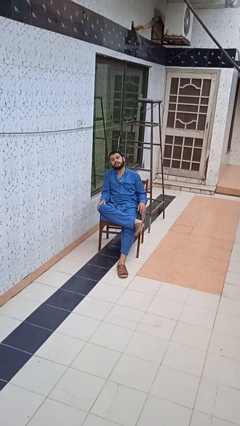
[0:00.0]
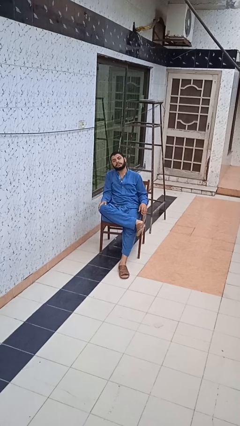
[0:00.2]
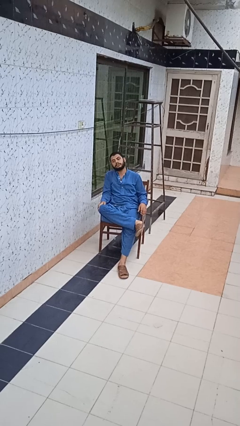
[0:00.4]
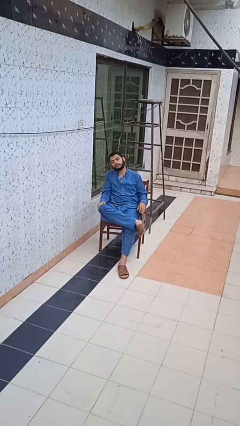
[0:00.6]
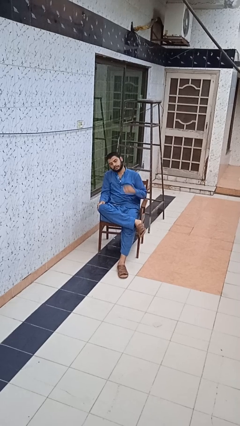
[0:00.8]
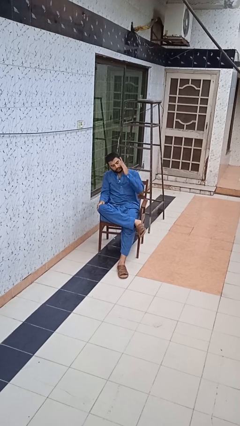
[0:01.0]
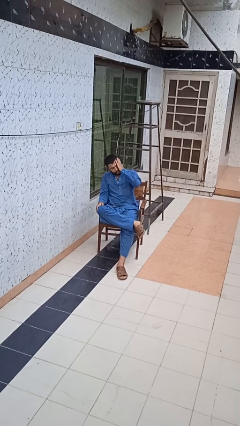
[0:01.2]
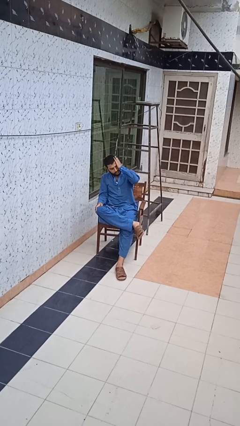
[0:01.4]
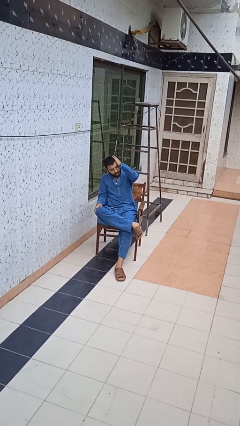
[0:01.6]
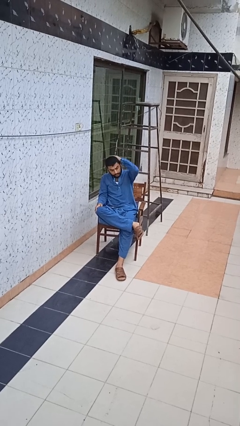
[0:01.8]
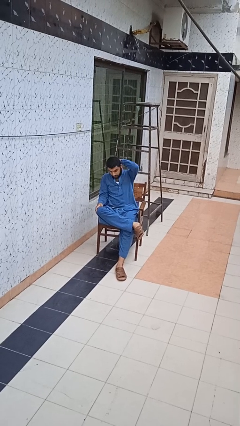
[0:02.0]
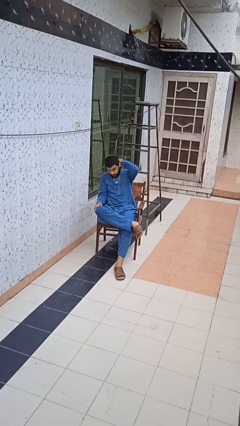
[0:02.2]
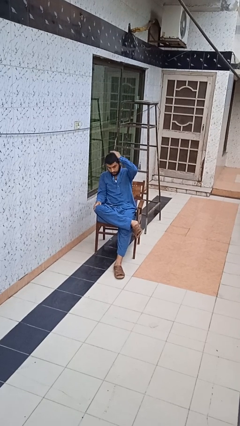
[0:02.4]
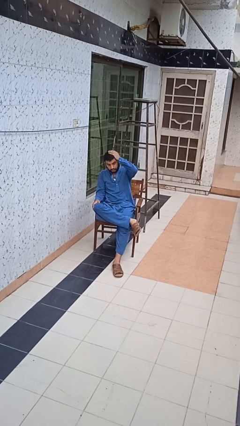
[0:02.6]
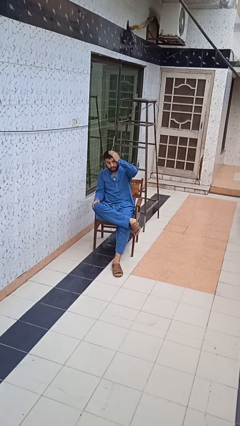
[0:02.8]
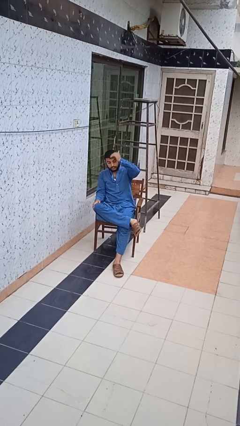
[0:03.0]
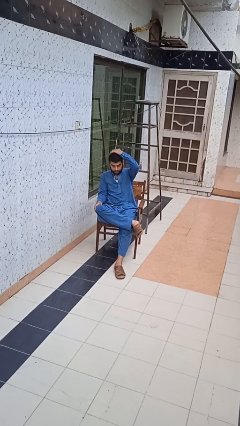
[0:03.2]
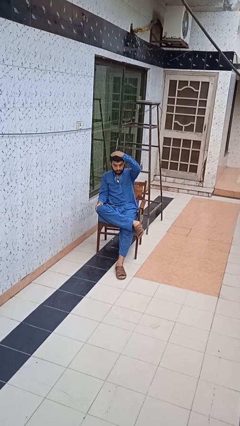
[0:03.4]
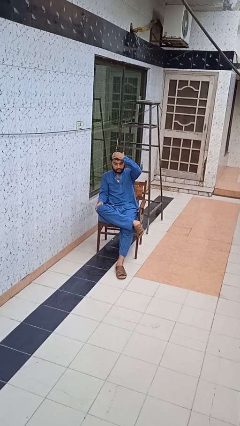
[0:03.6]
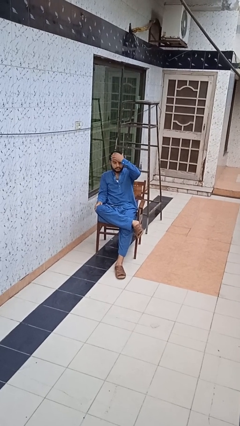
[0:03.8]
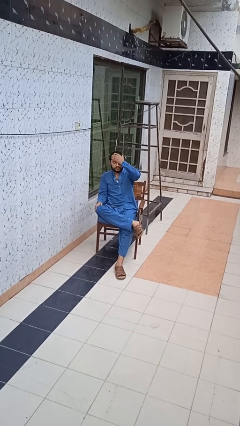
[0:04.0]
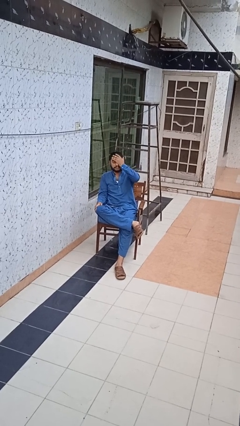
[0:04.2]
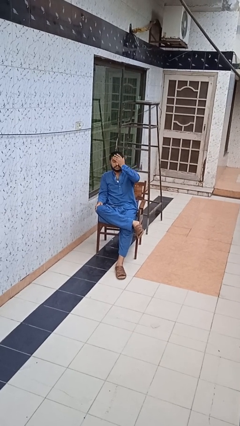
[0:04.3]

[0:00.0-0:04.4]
person strokes hair

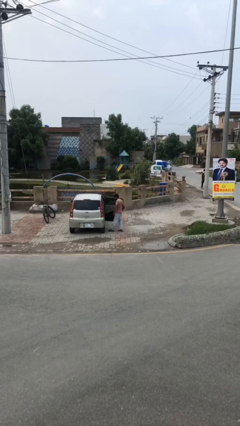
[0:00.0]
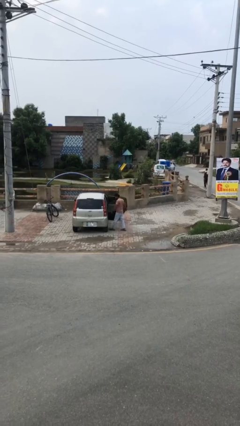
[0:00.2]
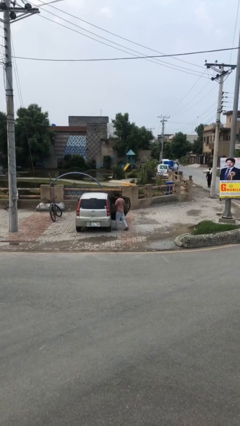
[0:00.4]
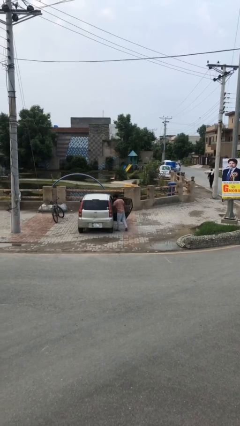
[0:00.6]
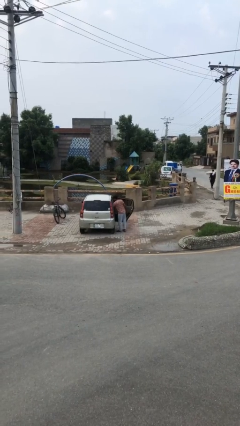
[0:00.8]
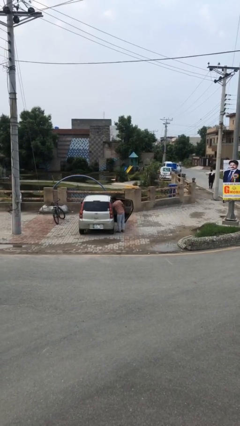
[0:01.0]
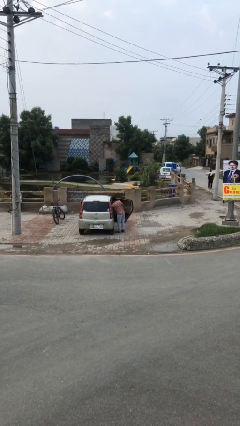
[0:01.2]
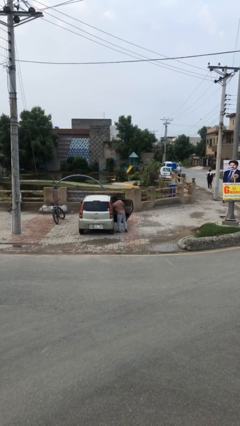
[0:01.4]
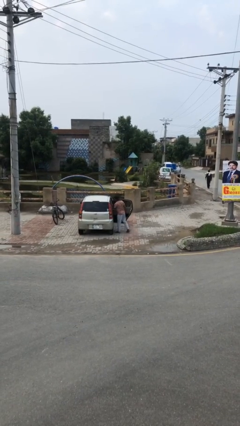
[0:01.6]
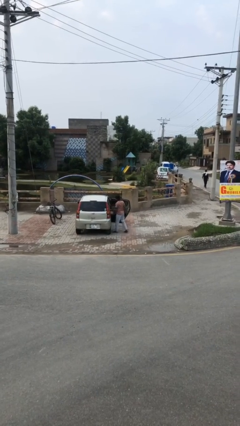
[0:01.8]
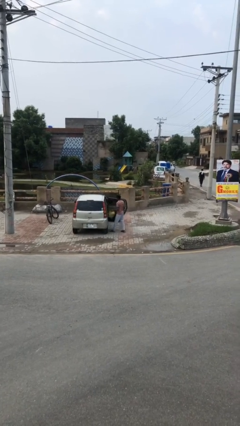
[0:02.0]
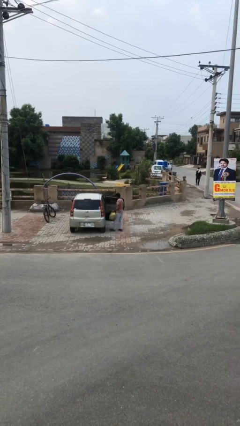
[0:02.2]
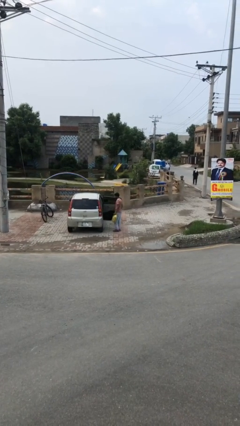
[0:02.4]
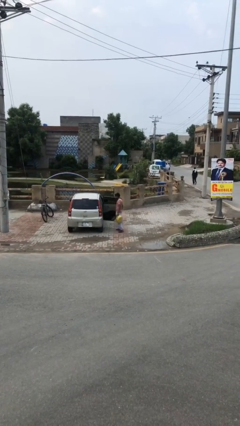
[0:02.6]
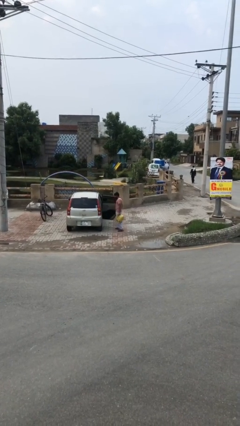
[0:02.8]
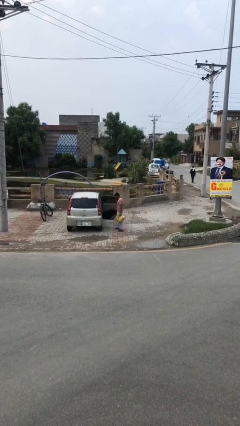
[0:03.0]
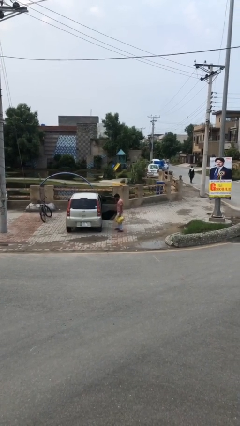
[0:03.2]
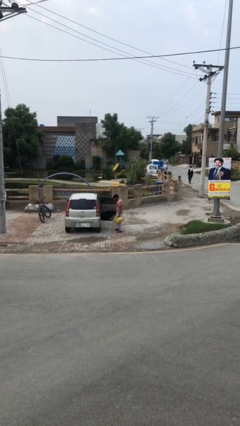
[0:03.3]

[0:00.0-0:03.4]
person unloads car

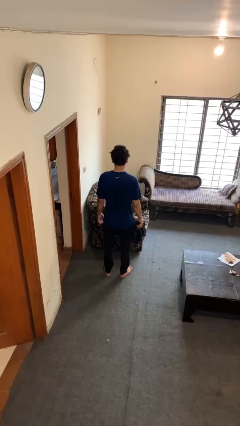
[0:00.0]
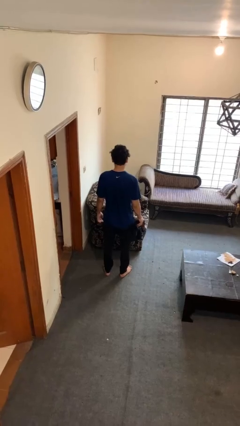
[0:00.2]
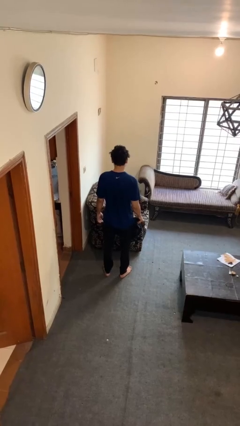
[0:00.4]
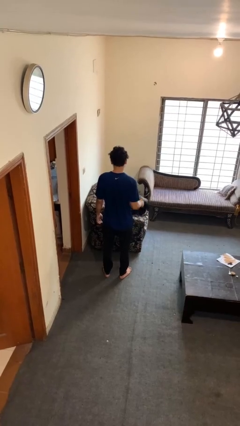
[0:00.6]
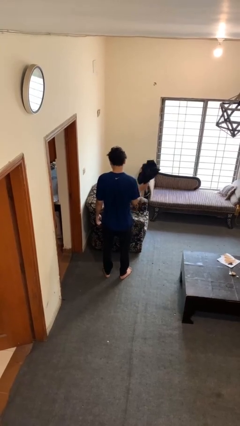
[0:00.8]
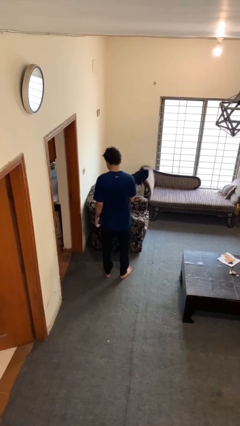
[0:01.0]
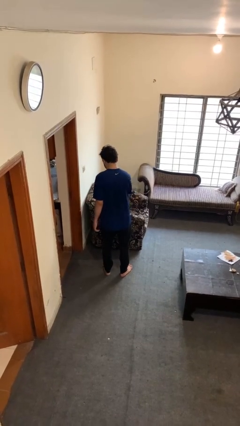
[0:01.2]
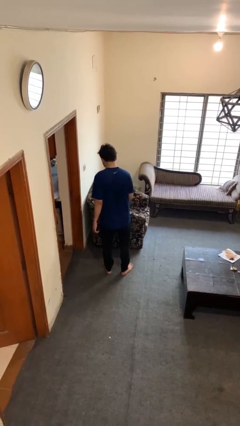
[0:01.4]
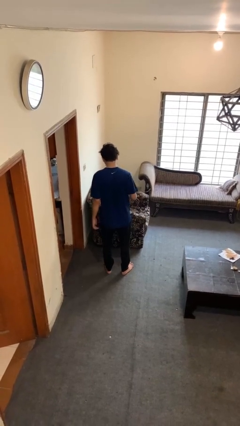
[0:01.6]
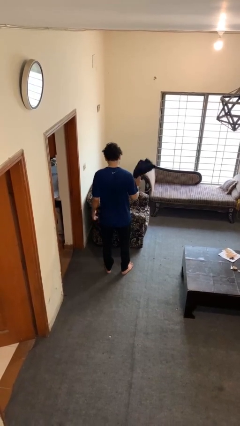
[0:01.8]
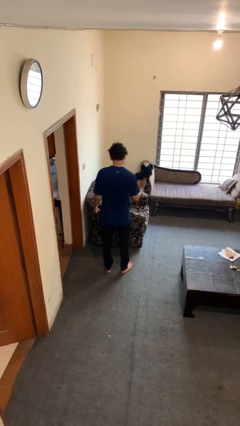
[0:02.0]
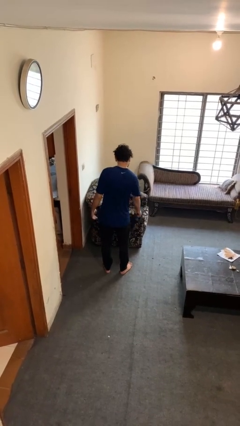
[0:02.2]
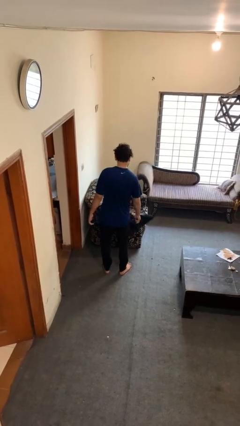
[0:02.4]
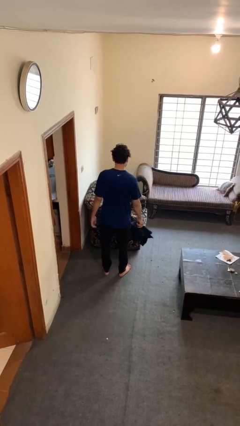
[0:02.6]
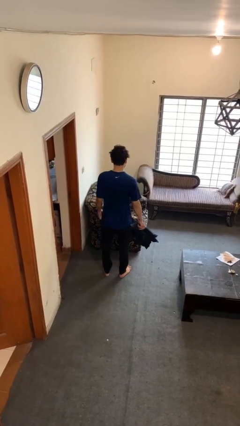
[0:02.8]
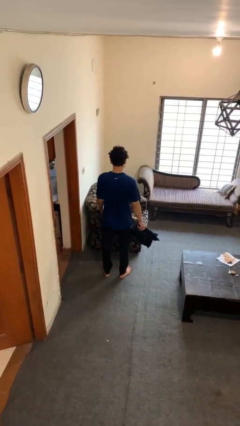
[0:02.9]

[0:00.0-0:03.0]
person dusts furniture

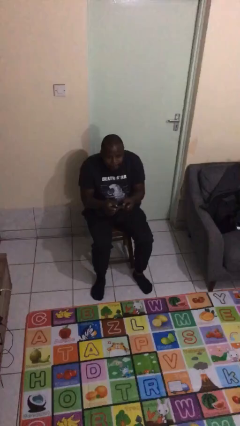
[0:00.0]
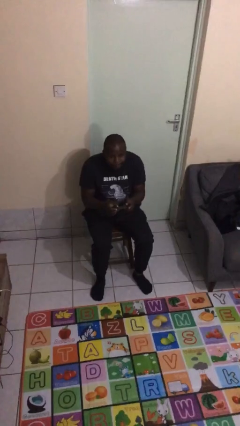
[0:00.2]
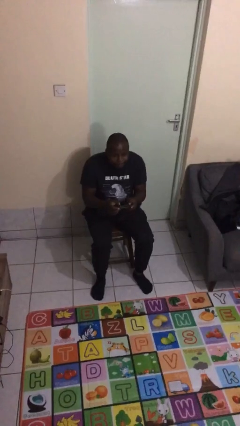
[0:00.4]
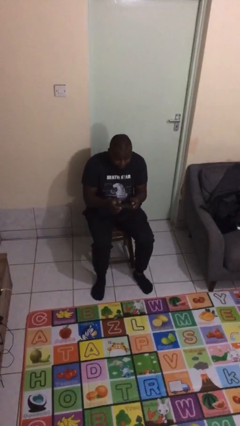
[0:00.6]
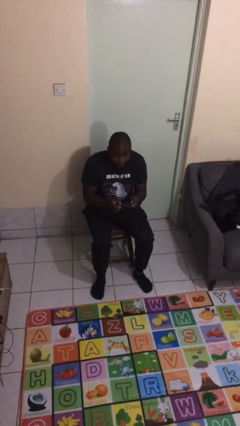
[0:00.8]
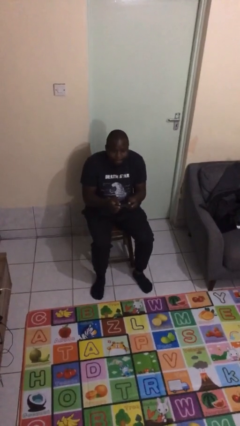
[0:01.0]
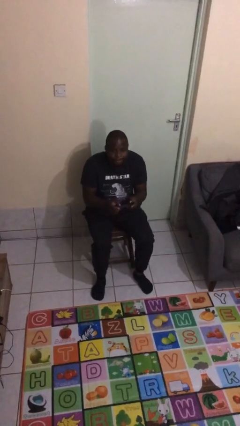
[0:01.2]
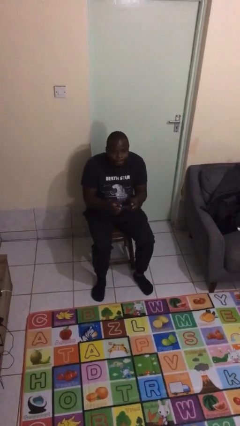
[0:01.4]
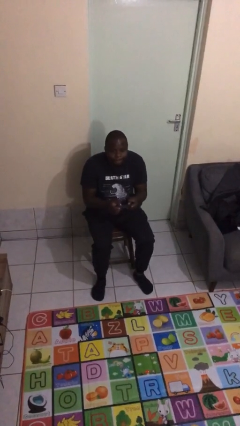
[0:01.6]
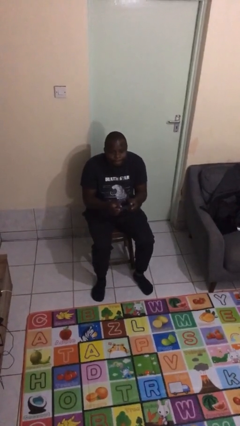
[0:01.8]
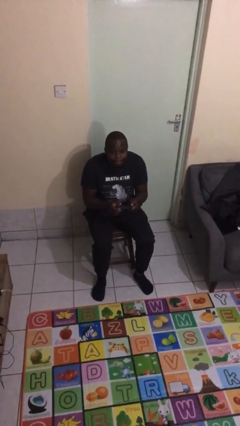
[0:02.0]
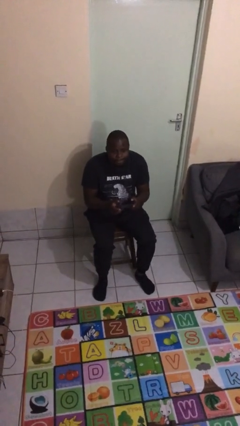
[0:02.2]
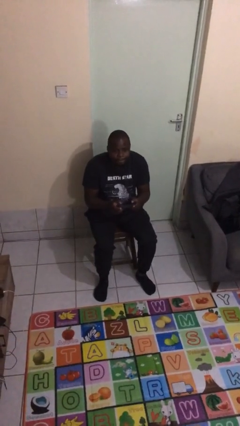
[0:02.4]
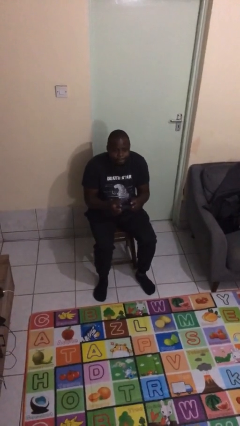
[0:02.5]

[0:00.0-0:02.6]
person interacts with handheld game

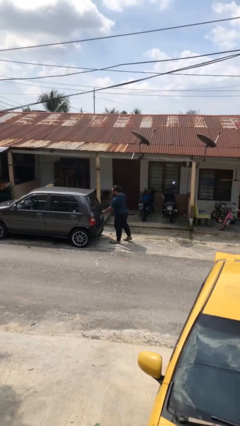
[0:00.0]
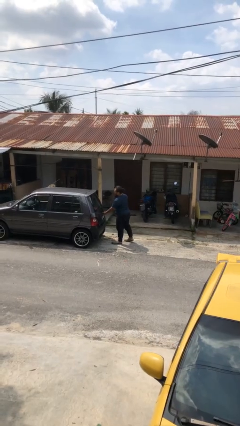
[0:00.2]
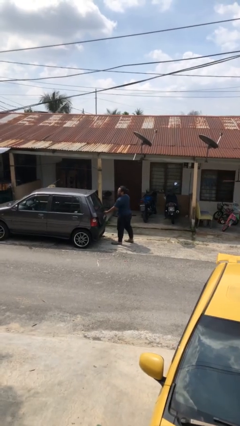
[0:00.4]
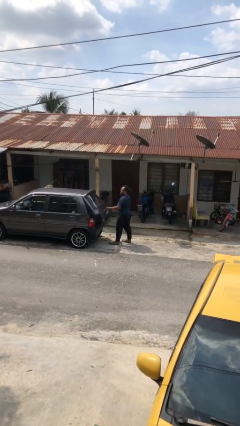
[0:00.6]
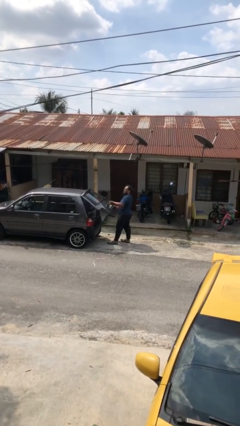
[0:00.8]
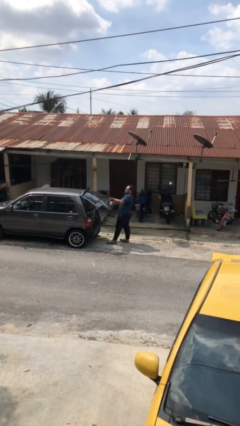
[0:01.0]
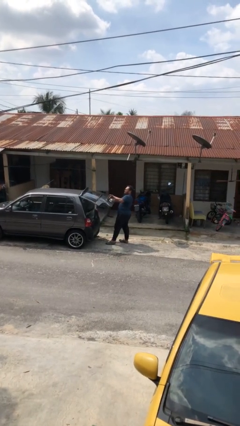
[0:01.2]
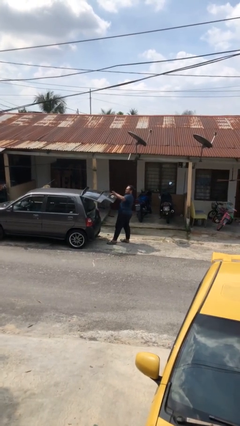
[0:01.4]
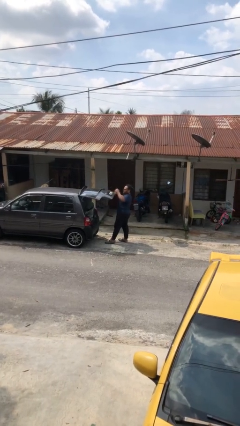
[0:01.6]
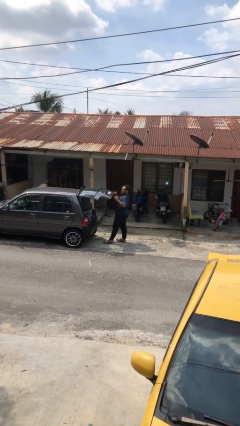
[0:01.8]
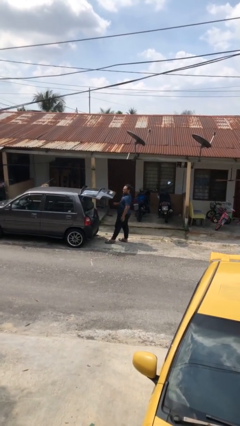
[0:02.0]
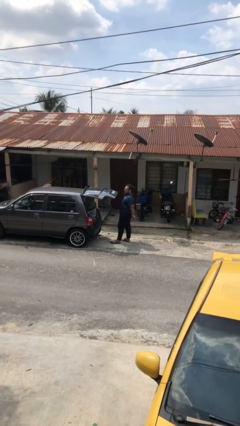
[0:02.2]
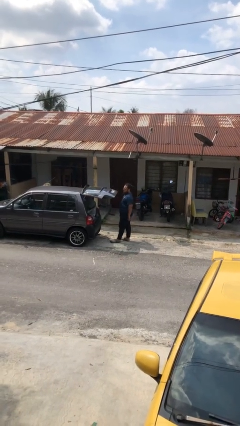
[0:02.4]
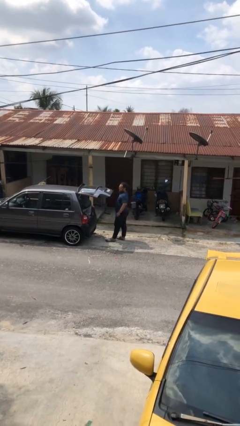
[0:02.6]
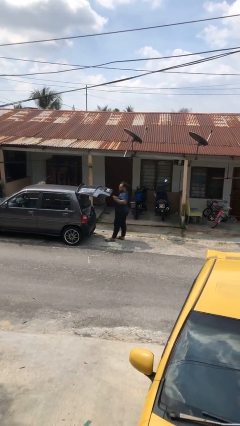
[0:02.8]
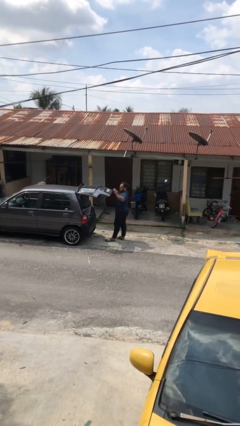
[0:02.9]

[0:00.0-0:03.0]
person opens car trunk

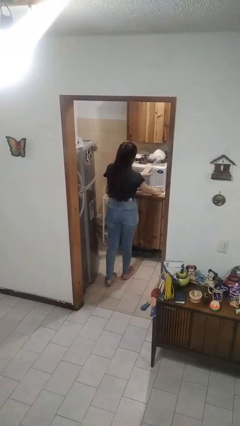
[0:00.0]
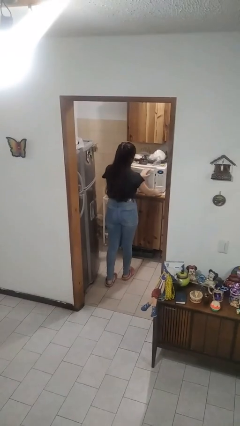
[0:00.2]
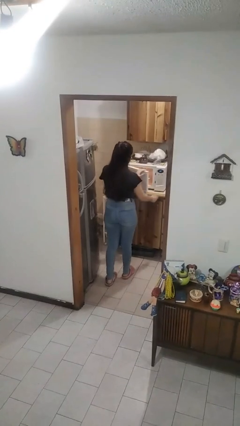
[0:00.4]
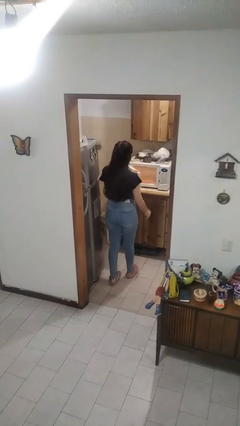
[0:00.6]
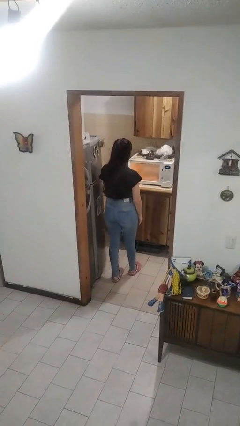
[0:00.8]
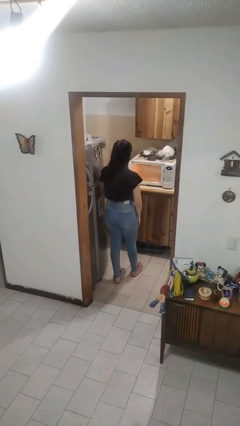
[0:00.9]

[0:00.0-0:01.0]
person opens microwave
